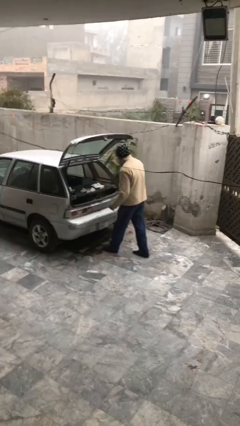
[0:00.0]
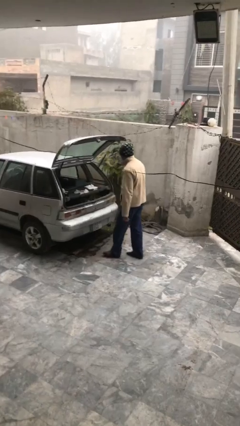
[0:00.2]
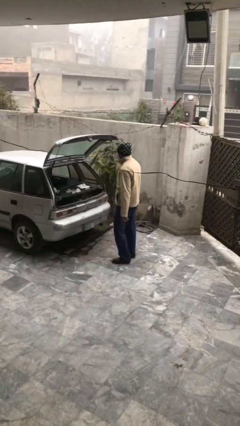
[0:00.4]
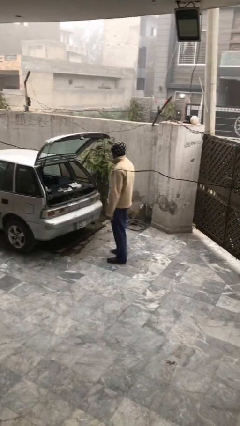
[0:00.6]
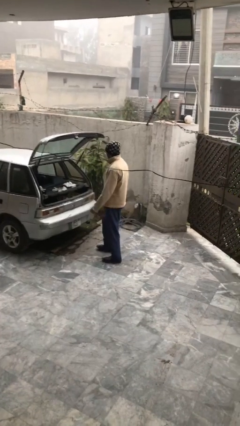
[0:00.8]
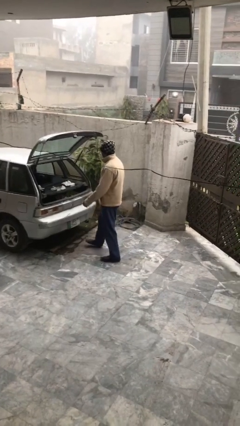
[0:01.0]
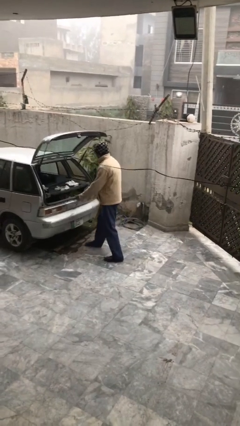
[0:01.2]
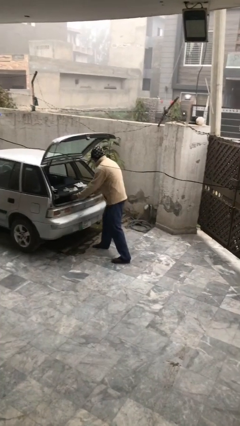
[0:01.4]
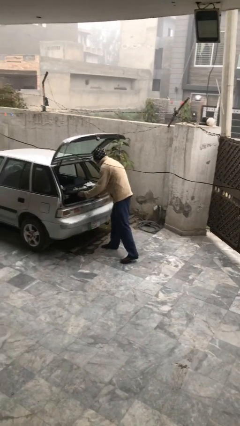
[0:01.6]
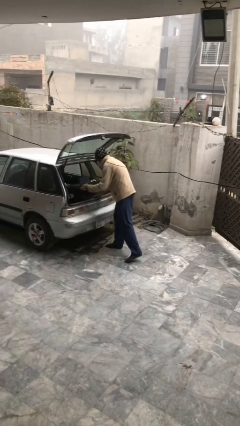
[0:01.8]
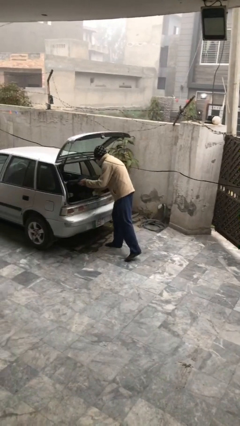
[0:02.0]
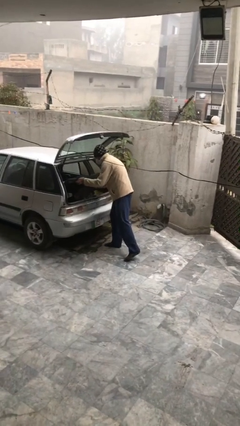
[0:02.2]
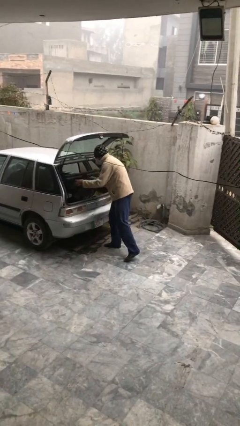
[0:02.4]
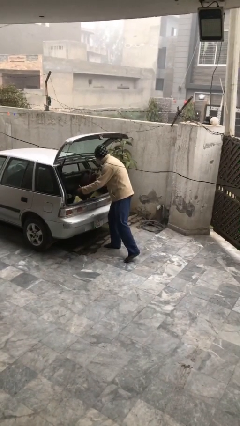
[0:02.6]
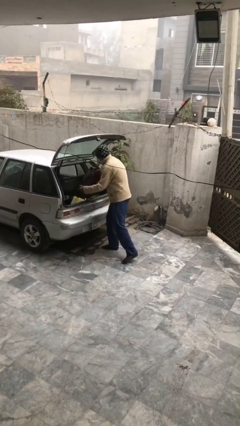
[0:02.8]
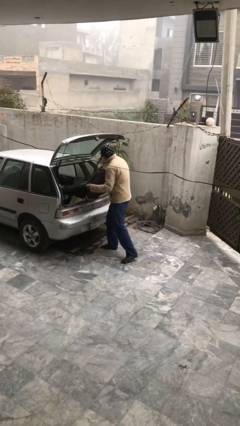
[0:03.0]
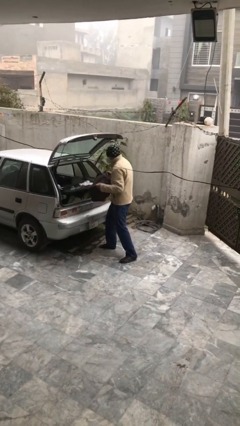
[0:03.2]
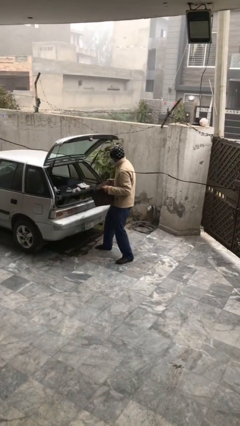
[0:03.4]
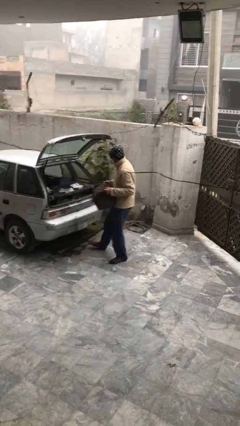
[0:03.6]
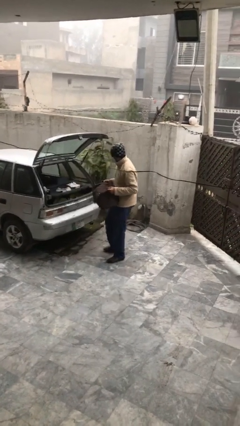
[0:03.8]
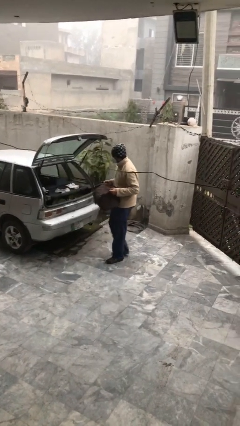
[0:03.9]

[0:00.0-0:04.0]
person unloads car

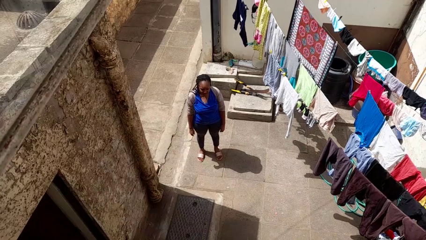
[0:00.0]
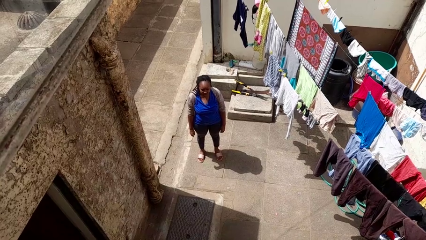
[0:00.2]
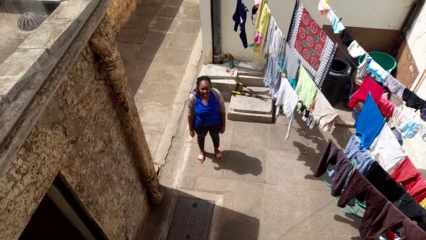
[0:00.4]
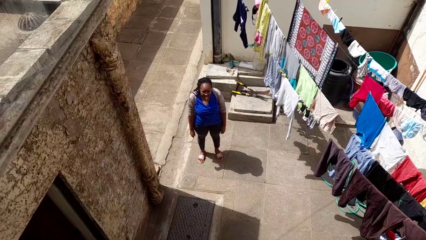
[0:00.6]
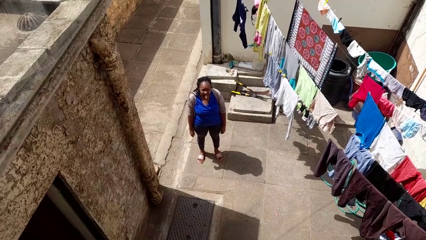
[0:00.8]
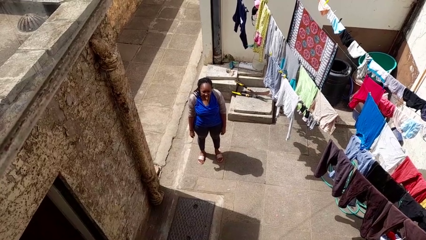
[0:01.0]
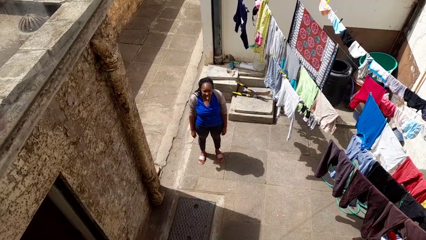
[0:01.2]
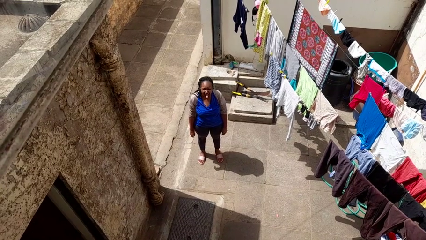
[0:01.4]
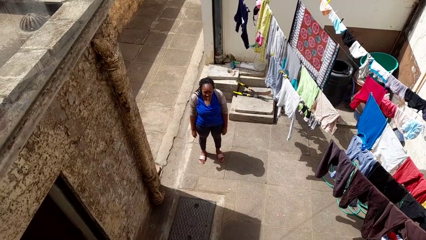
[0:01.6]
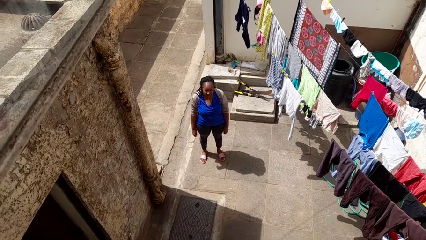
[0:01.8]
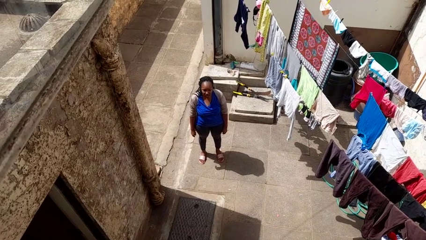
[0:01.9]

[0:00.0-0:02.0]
person sticks out tongue

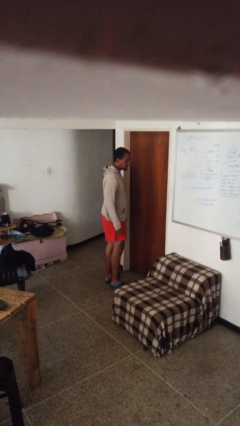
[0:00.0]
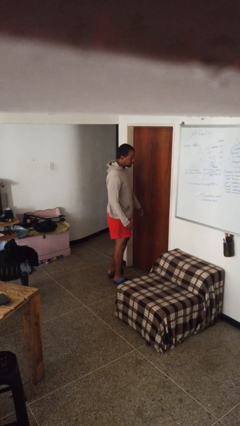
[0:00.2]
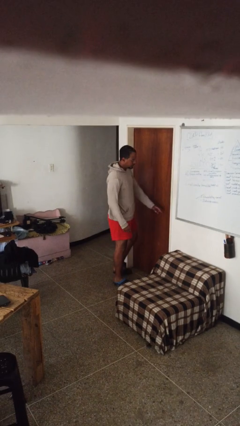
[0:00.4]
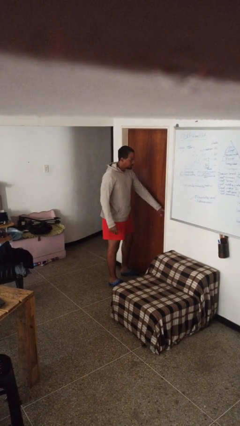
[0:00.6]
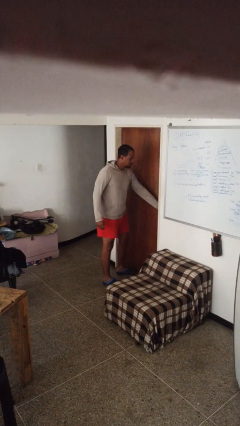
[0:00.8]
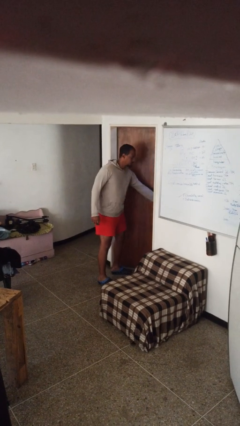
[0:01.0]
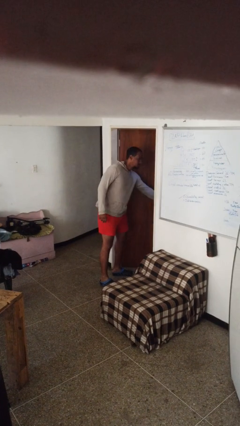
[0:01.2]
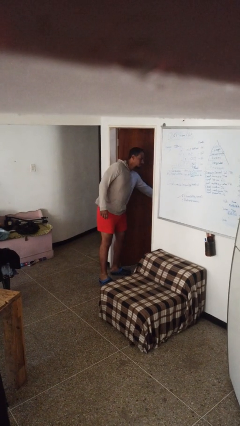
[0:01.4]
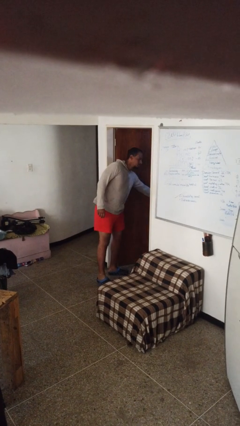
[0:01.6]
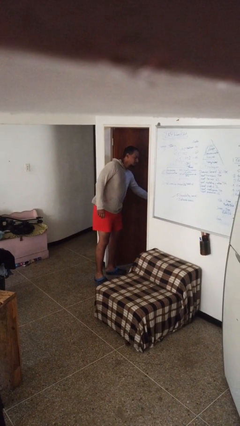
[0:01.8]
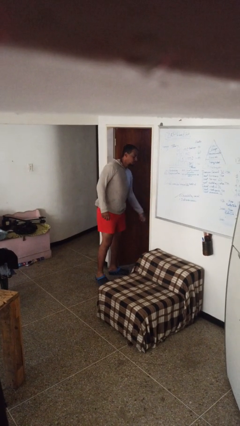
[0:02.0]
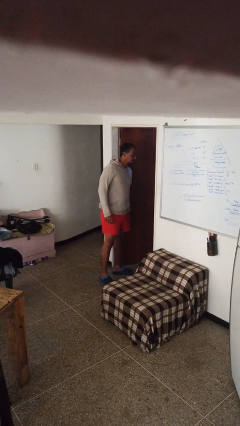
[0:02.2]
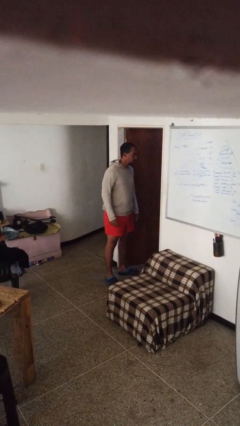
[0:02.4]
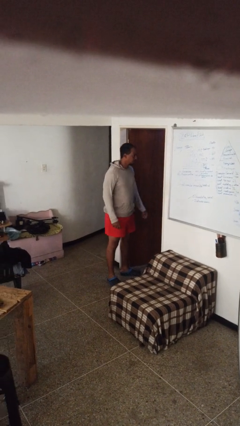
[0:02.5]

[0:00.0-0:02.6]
person opens facility door

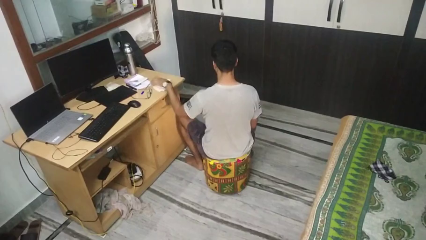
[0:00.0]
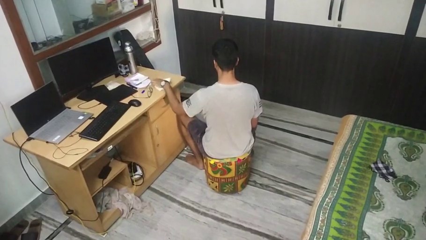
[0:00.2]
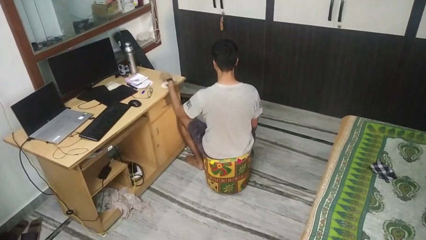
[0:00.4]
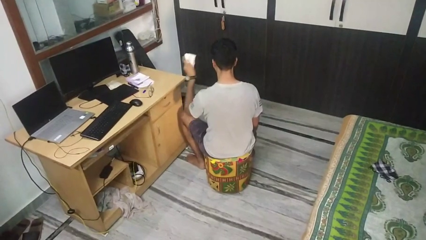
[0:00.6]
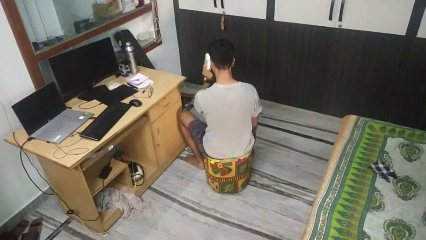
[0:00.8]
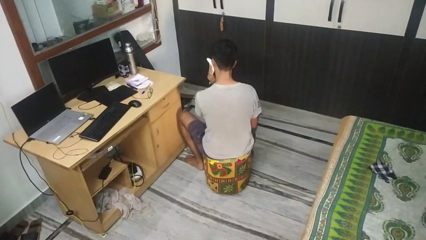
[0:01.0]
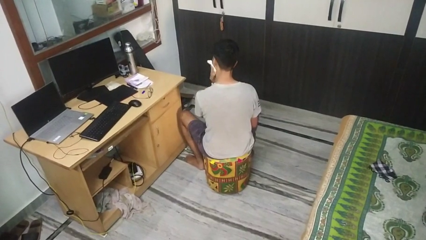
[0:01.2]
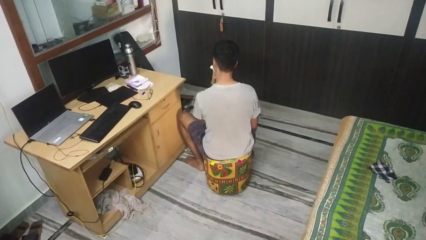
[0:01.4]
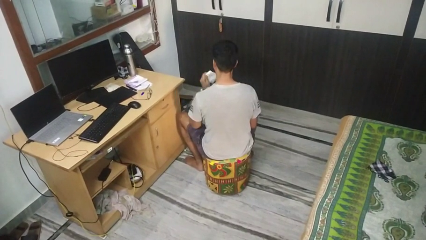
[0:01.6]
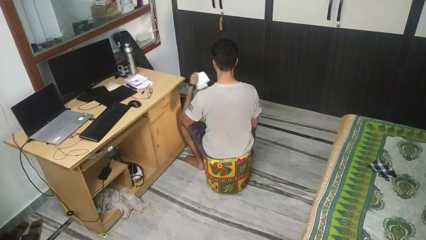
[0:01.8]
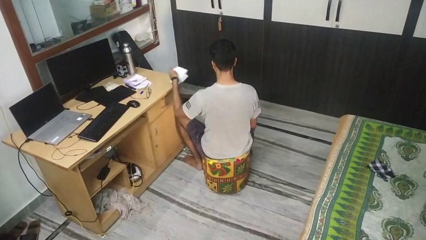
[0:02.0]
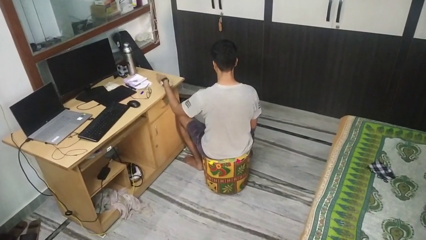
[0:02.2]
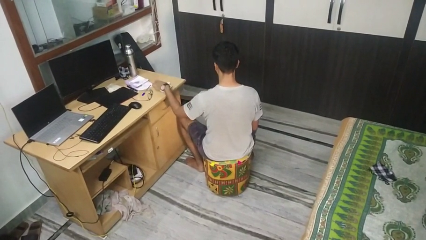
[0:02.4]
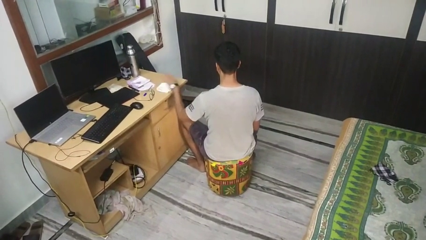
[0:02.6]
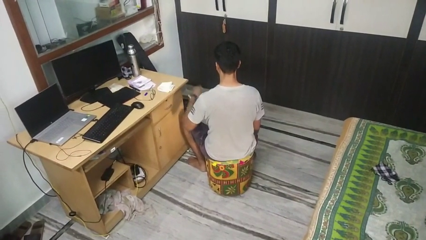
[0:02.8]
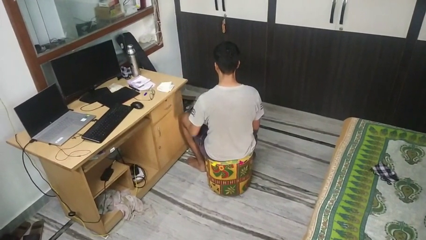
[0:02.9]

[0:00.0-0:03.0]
person wipes mouth with napkin

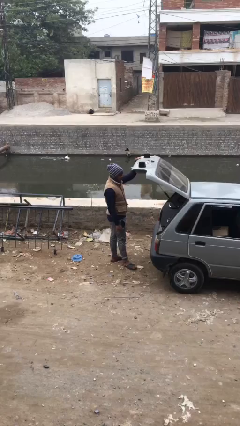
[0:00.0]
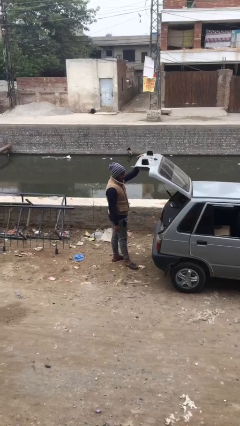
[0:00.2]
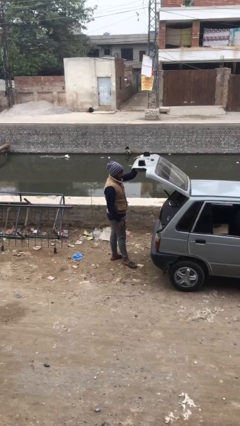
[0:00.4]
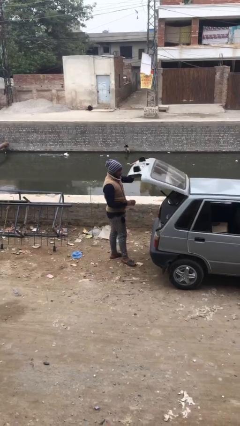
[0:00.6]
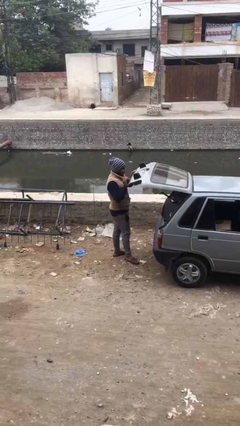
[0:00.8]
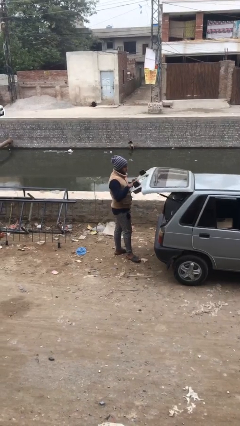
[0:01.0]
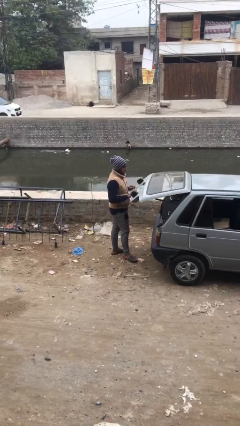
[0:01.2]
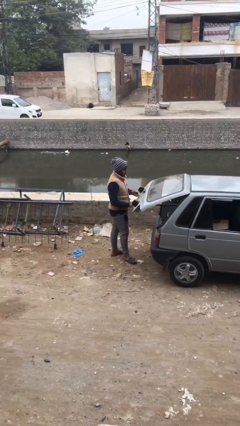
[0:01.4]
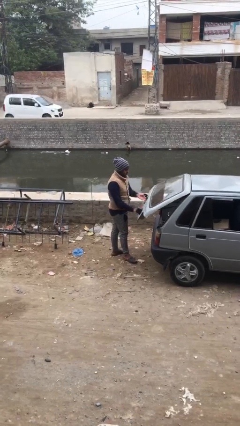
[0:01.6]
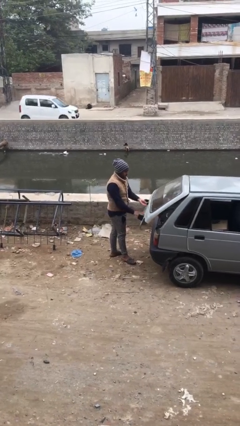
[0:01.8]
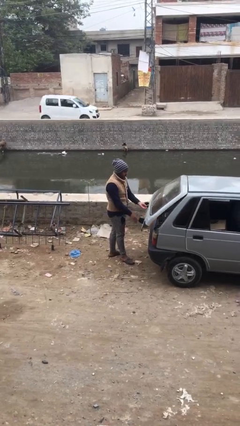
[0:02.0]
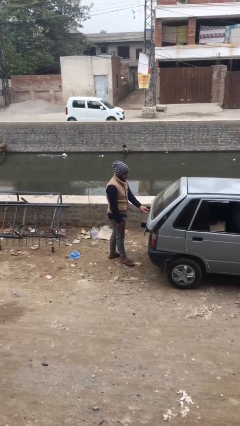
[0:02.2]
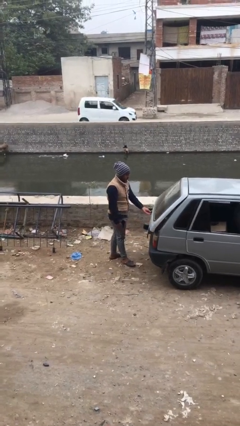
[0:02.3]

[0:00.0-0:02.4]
person closes car trunk

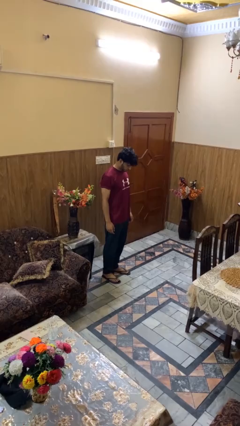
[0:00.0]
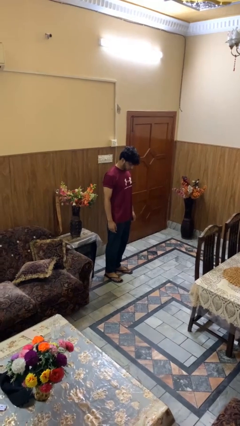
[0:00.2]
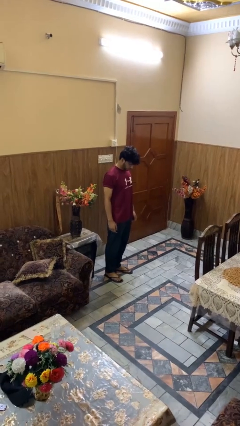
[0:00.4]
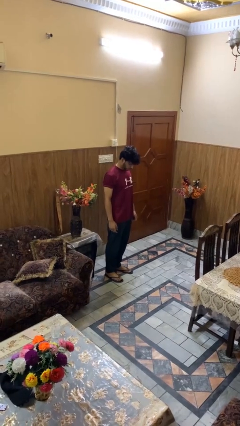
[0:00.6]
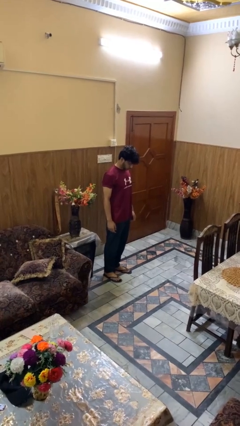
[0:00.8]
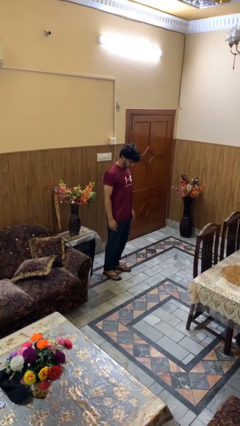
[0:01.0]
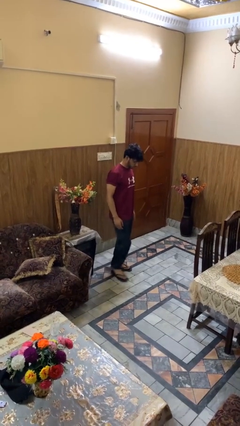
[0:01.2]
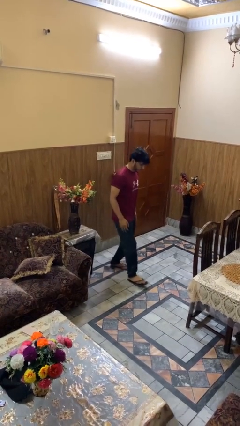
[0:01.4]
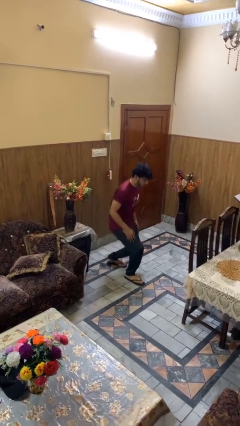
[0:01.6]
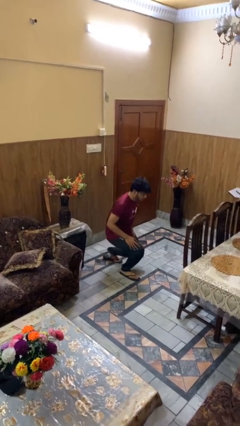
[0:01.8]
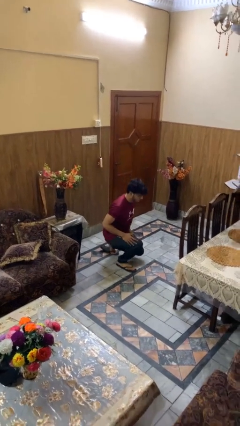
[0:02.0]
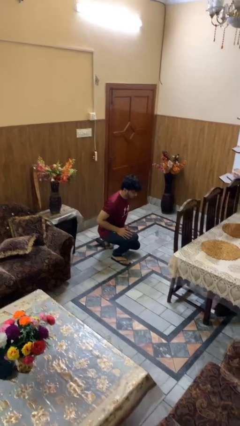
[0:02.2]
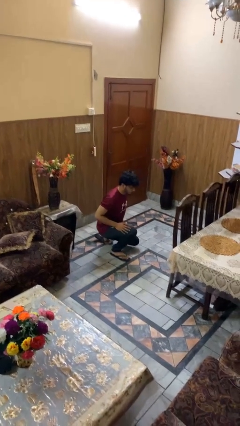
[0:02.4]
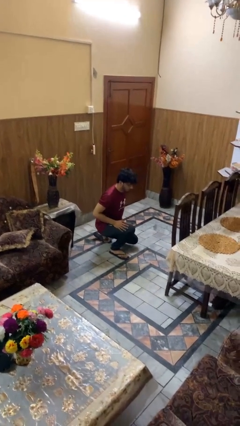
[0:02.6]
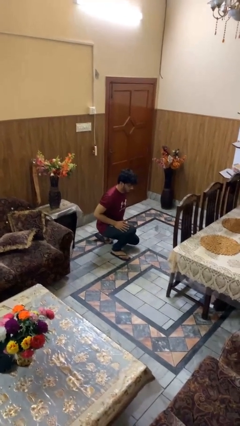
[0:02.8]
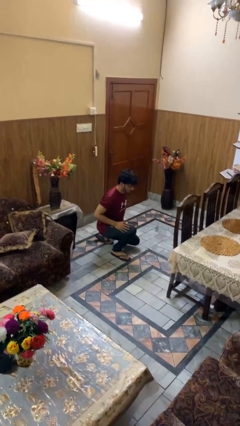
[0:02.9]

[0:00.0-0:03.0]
person kneels

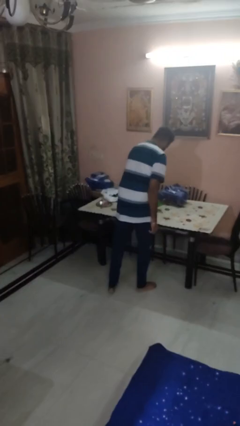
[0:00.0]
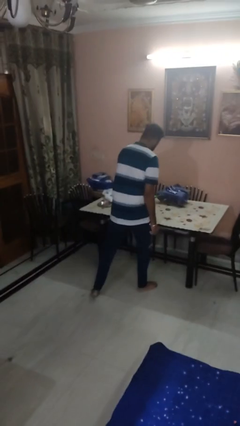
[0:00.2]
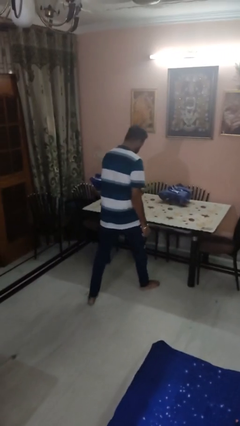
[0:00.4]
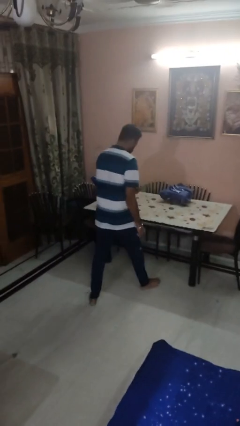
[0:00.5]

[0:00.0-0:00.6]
person picks up object from table
